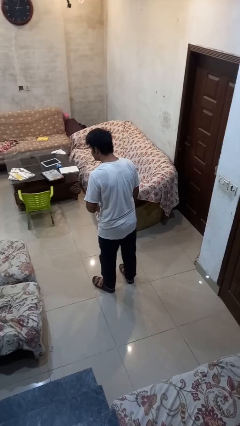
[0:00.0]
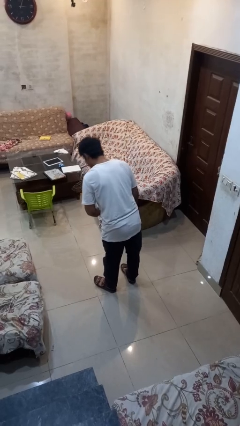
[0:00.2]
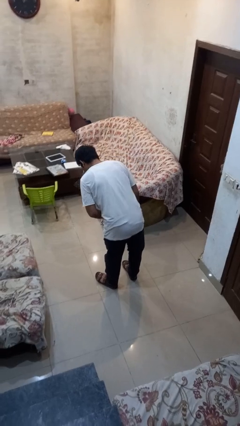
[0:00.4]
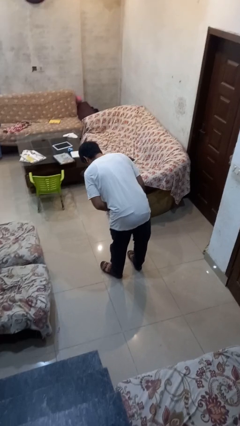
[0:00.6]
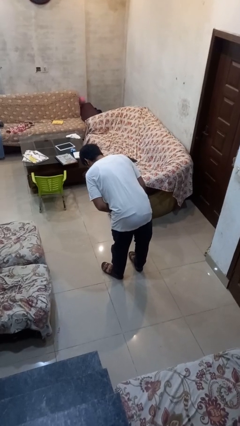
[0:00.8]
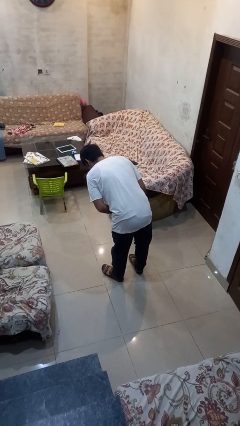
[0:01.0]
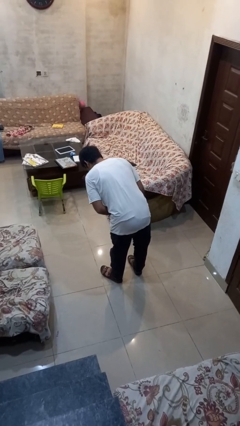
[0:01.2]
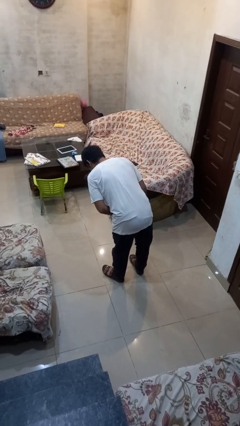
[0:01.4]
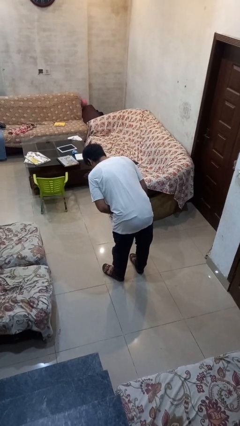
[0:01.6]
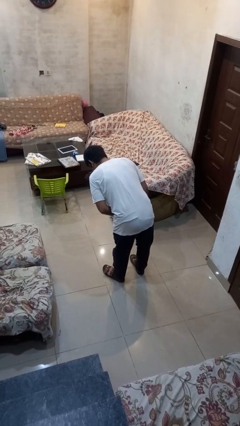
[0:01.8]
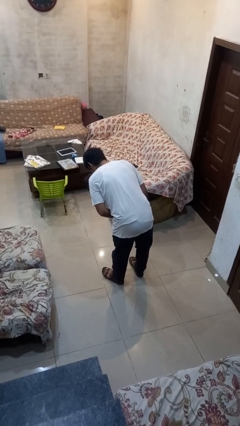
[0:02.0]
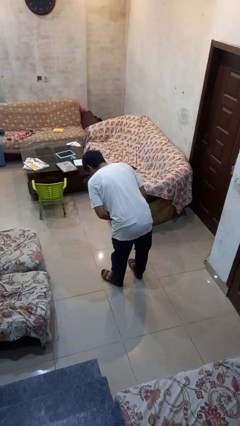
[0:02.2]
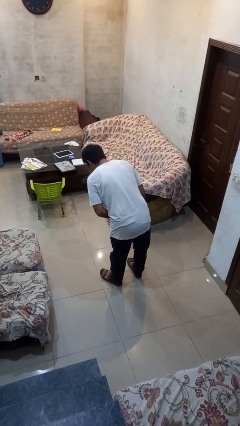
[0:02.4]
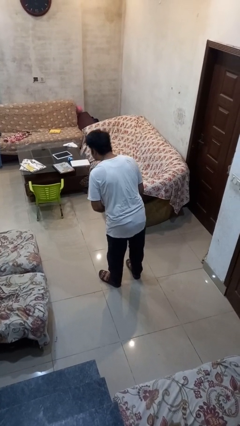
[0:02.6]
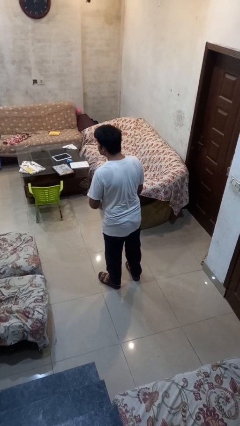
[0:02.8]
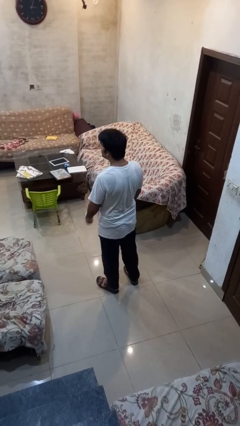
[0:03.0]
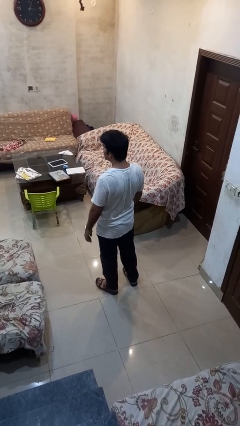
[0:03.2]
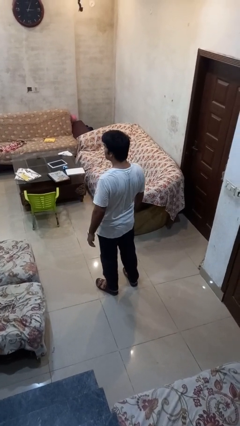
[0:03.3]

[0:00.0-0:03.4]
person bows

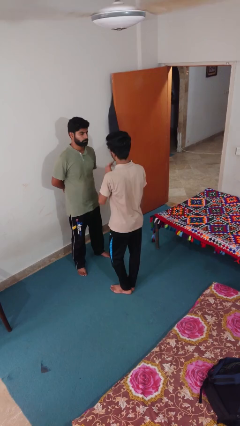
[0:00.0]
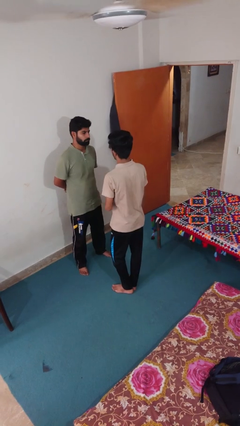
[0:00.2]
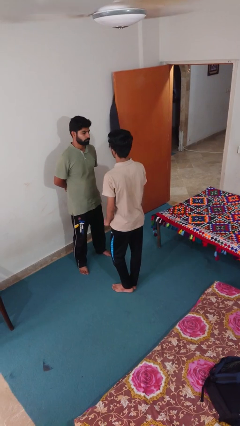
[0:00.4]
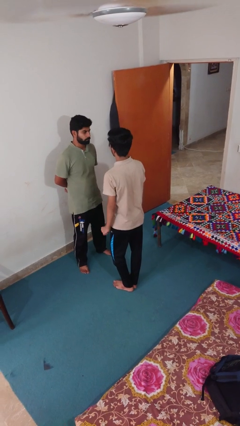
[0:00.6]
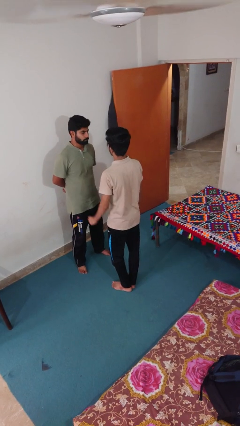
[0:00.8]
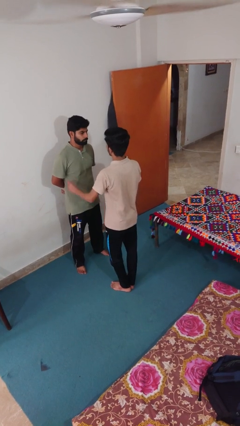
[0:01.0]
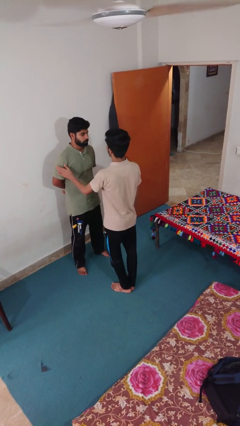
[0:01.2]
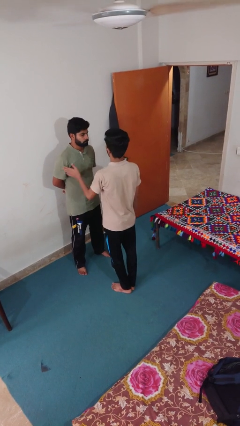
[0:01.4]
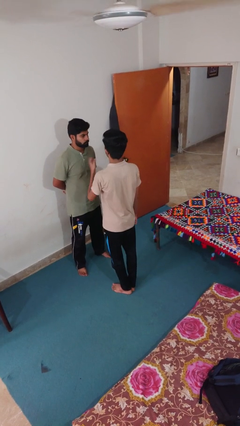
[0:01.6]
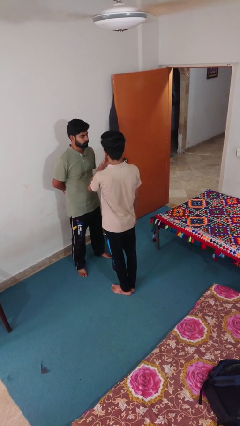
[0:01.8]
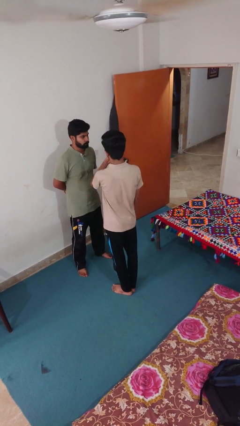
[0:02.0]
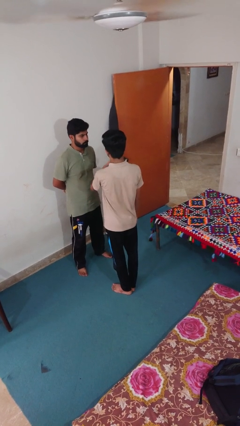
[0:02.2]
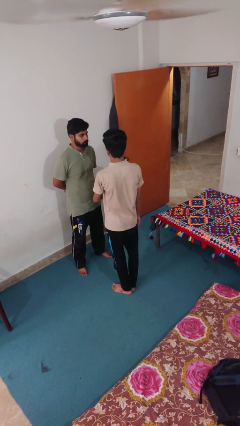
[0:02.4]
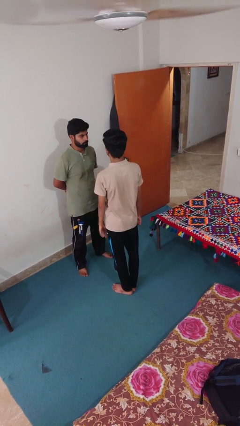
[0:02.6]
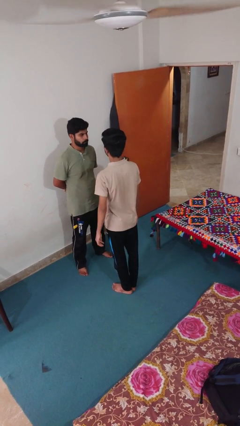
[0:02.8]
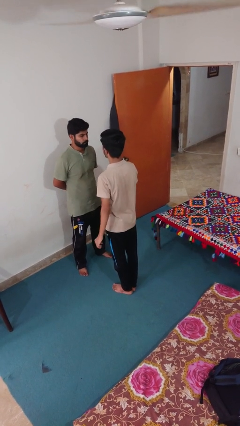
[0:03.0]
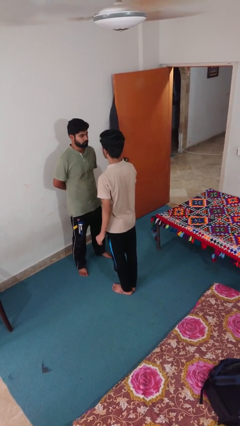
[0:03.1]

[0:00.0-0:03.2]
person shoves person

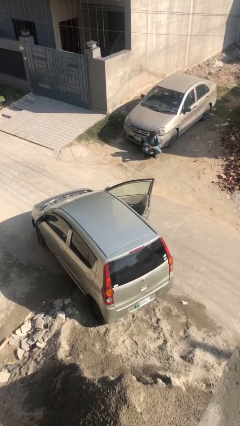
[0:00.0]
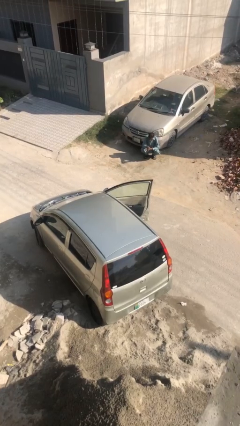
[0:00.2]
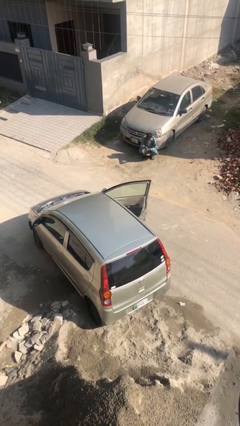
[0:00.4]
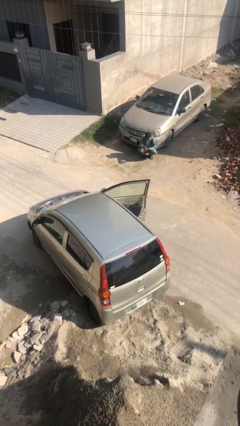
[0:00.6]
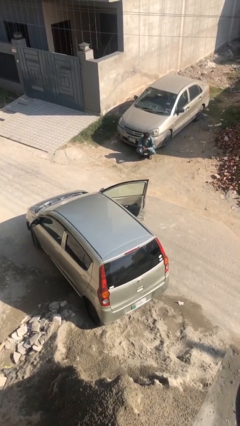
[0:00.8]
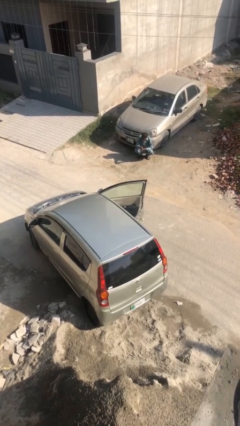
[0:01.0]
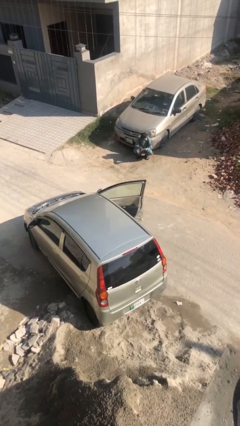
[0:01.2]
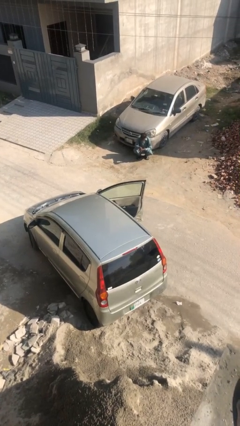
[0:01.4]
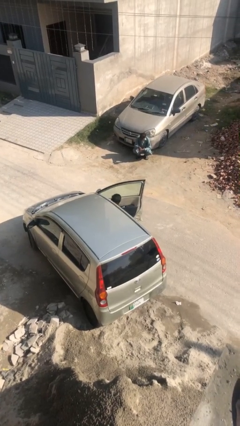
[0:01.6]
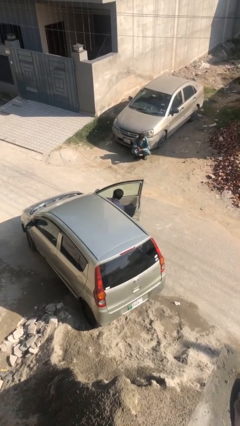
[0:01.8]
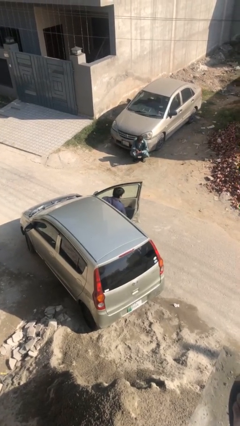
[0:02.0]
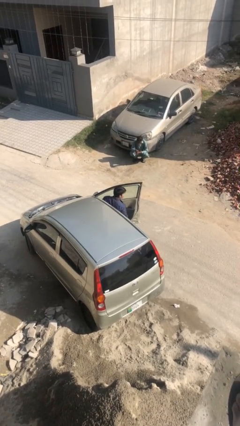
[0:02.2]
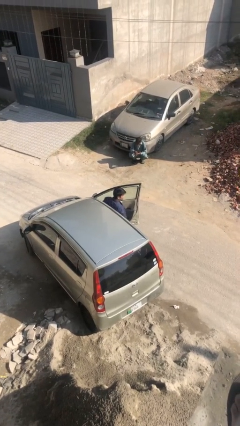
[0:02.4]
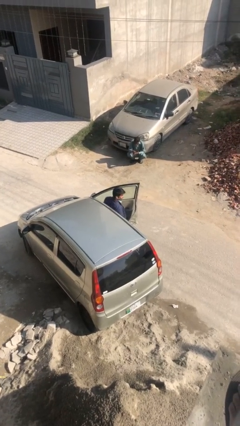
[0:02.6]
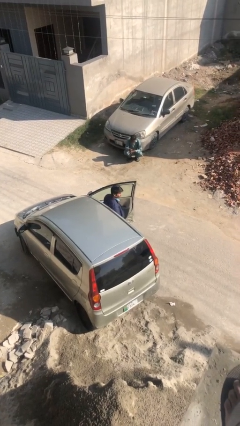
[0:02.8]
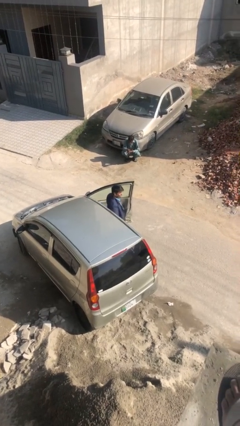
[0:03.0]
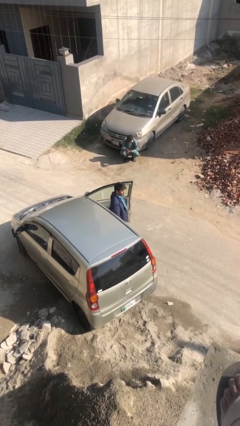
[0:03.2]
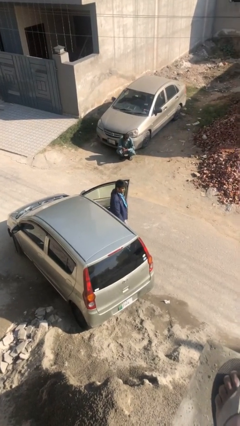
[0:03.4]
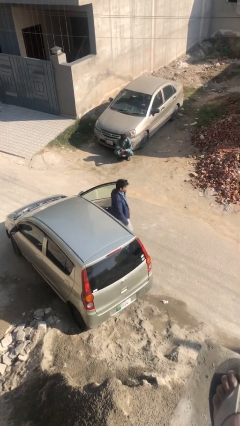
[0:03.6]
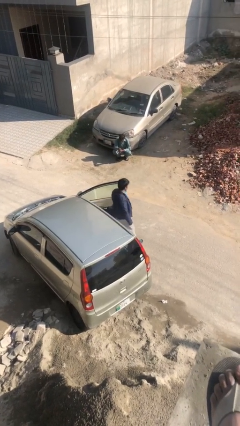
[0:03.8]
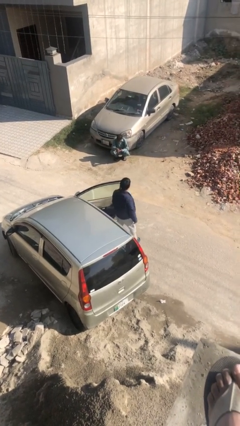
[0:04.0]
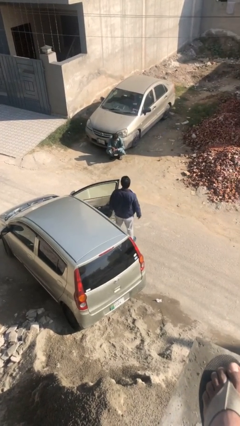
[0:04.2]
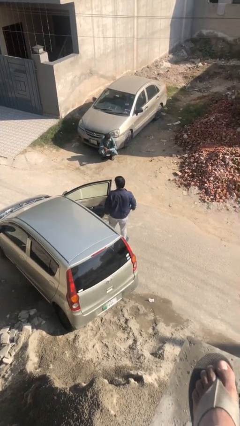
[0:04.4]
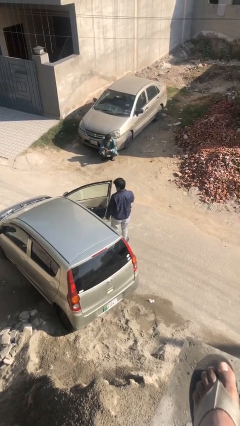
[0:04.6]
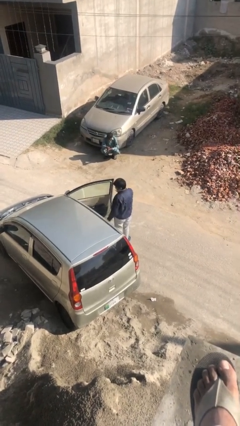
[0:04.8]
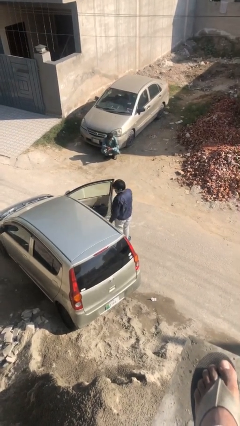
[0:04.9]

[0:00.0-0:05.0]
person exits car

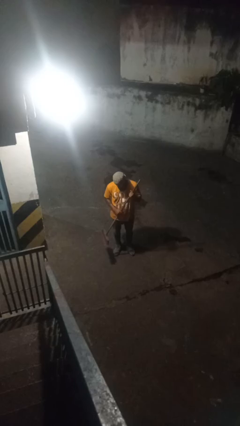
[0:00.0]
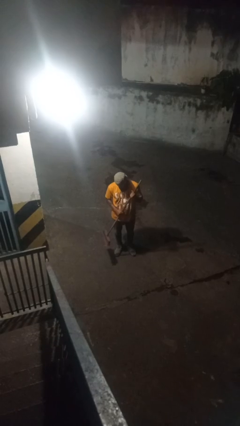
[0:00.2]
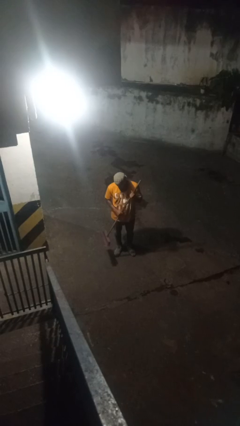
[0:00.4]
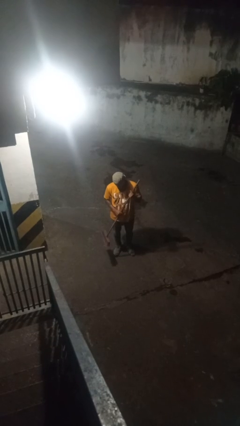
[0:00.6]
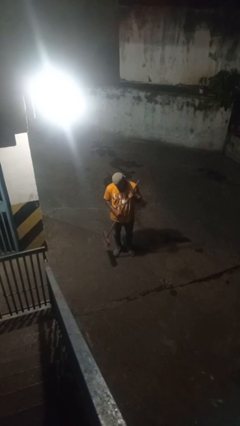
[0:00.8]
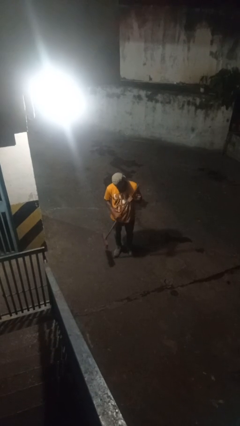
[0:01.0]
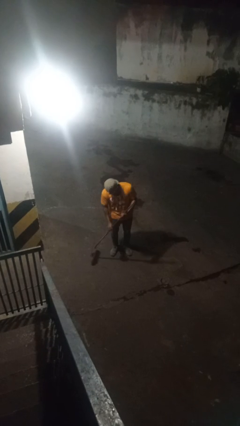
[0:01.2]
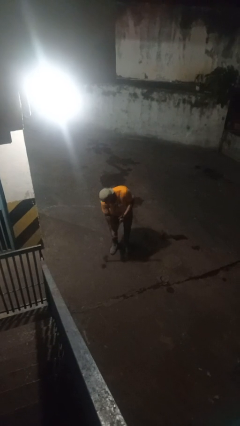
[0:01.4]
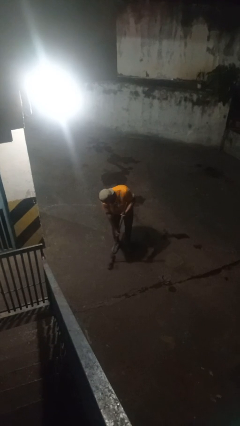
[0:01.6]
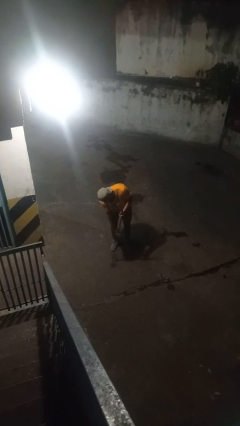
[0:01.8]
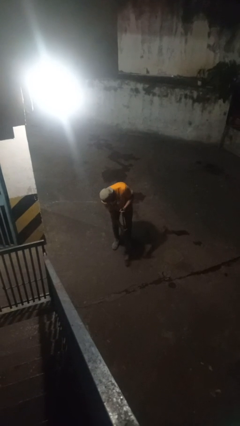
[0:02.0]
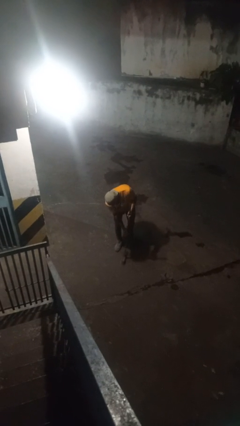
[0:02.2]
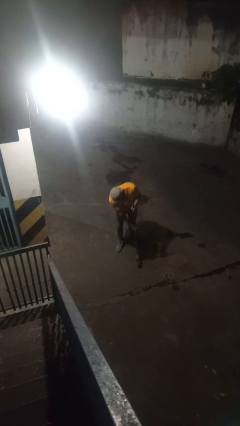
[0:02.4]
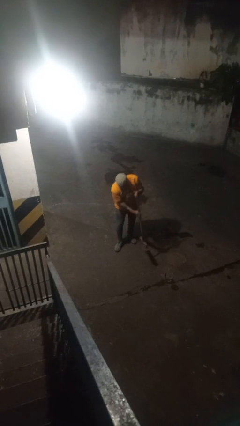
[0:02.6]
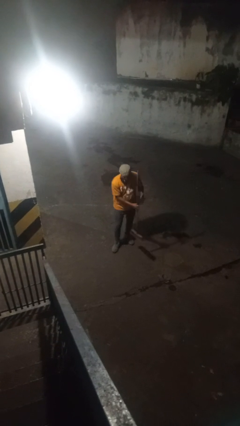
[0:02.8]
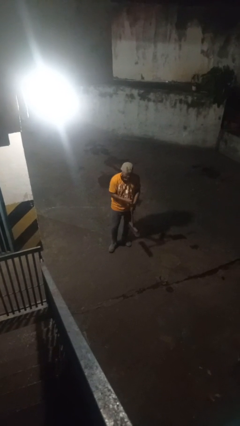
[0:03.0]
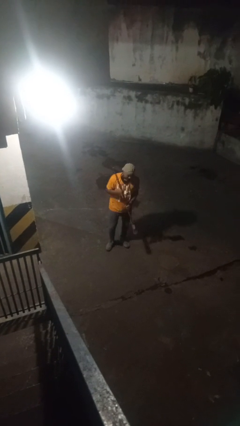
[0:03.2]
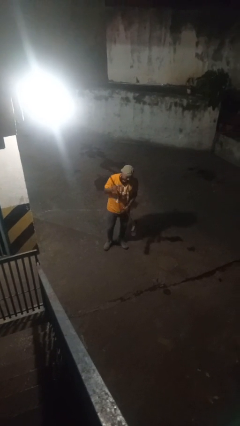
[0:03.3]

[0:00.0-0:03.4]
person sweeps floor

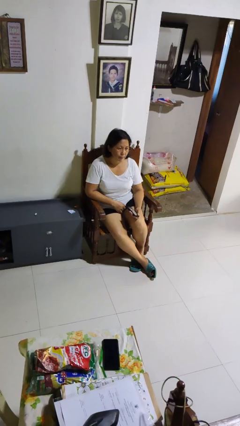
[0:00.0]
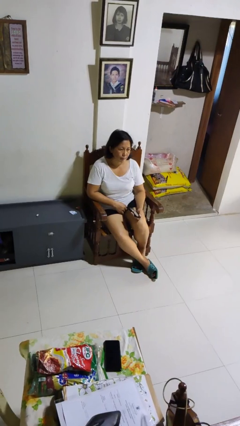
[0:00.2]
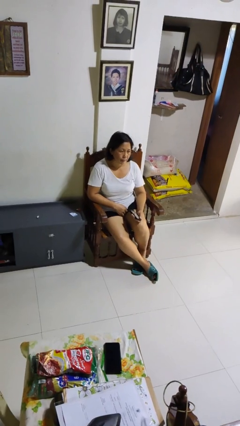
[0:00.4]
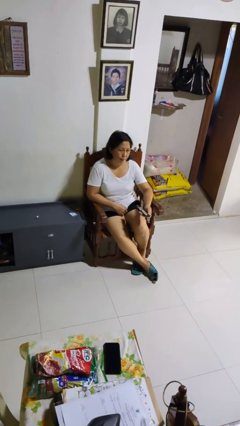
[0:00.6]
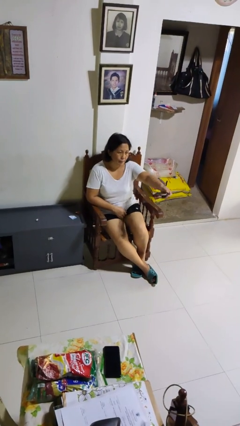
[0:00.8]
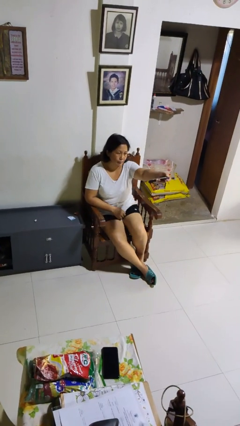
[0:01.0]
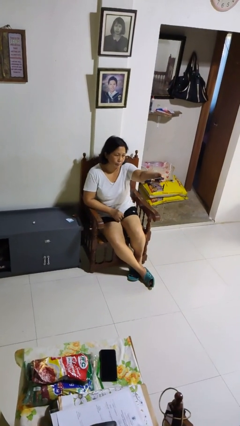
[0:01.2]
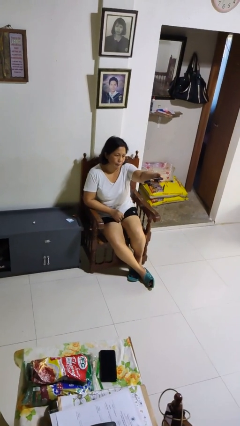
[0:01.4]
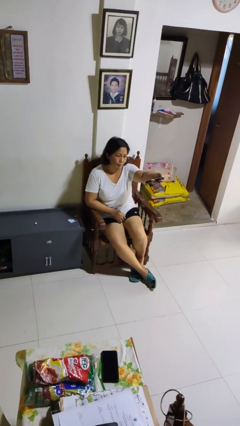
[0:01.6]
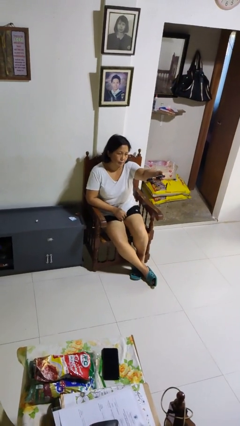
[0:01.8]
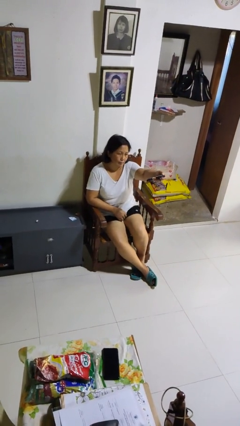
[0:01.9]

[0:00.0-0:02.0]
person uses television remote

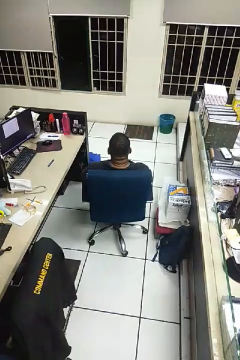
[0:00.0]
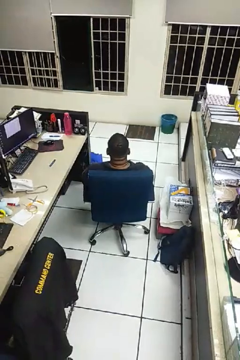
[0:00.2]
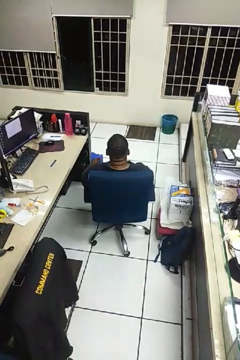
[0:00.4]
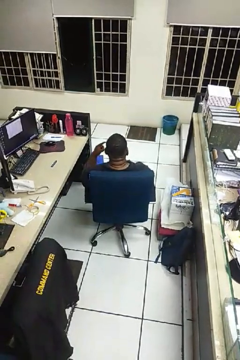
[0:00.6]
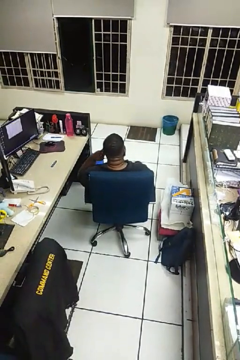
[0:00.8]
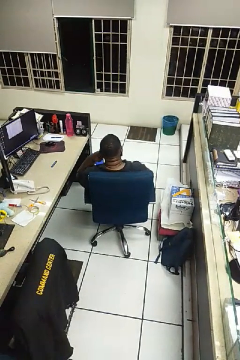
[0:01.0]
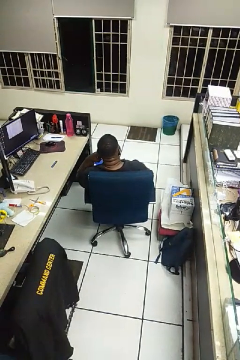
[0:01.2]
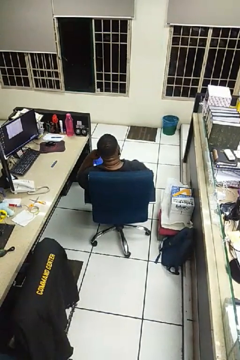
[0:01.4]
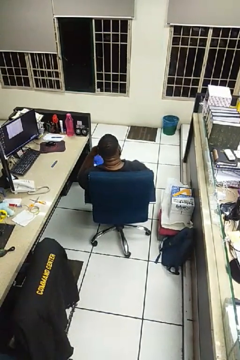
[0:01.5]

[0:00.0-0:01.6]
person gestures listen closely
